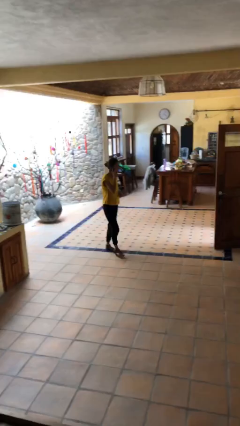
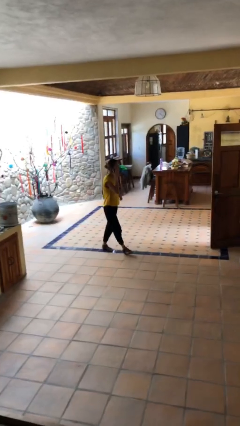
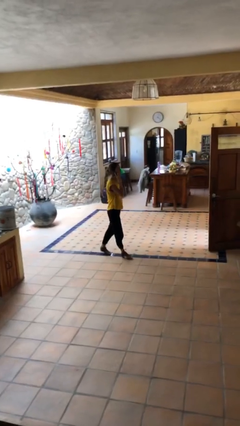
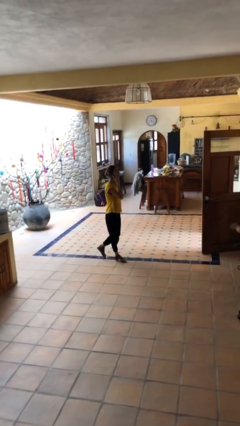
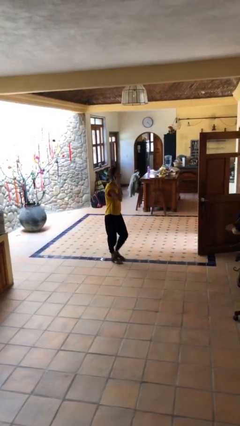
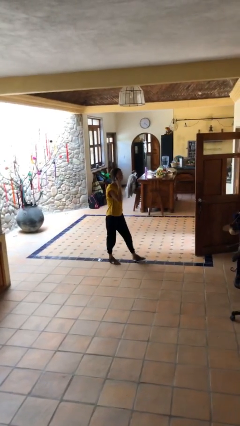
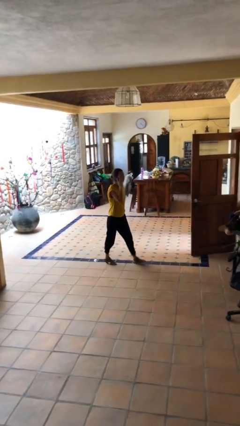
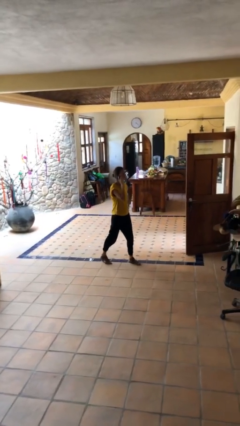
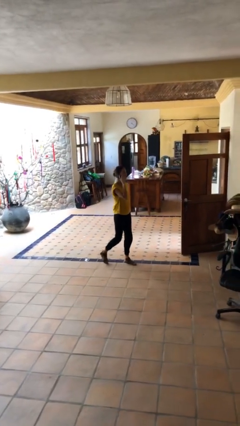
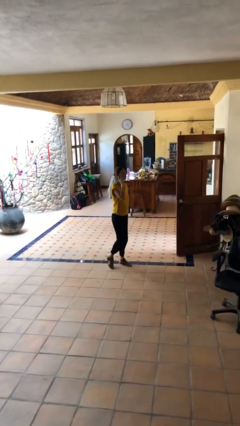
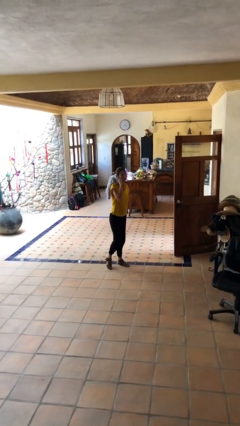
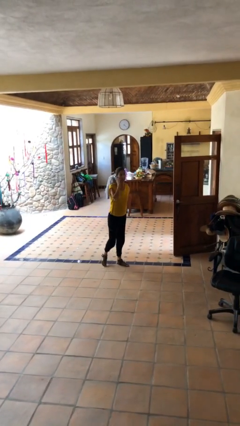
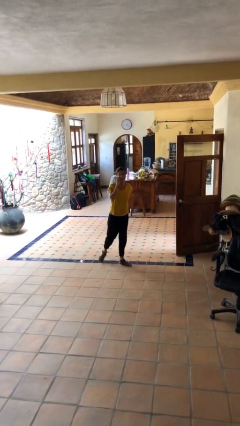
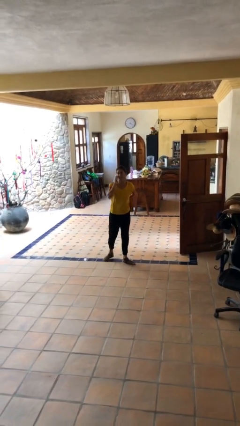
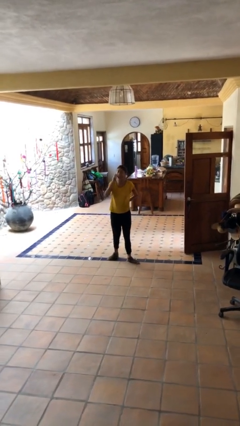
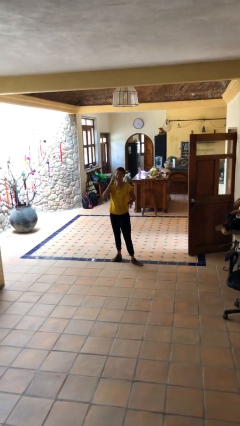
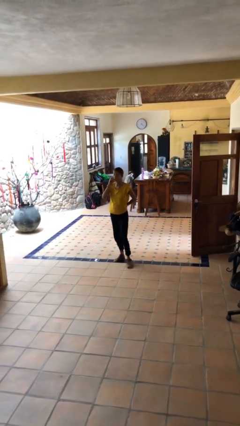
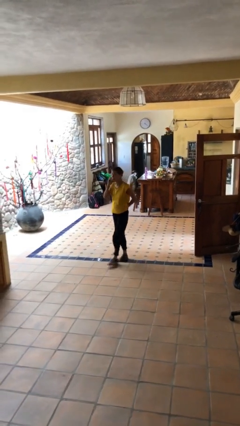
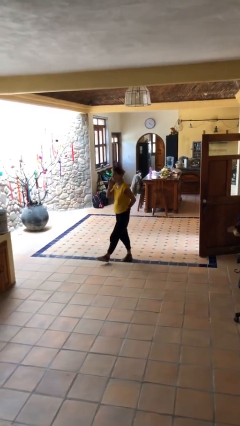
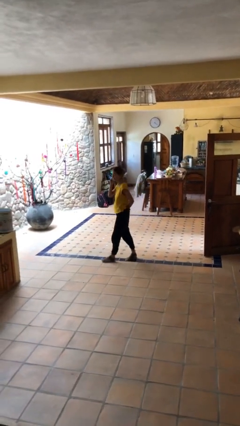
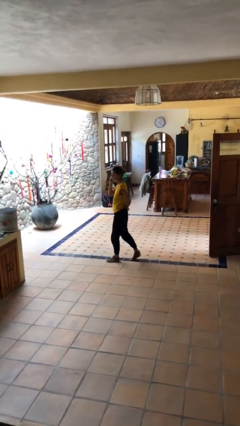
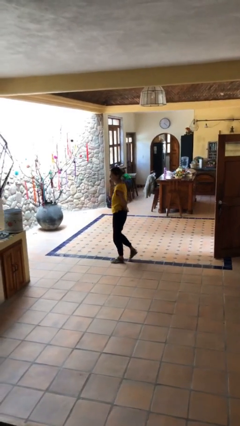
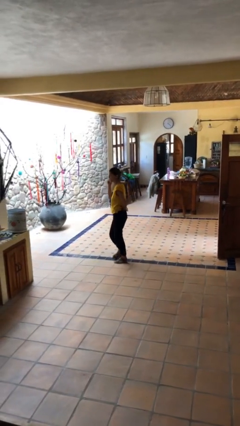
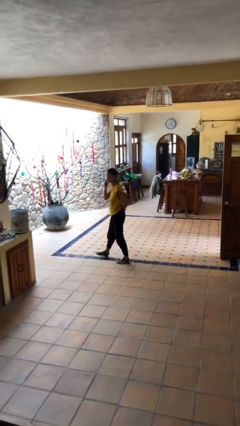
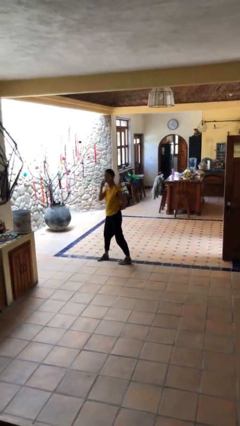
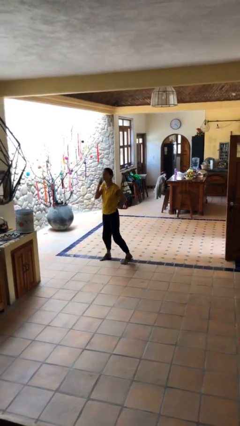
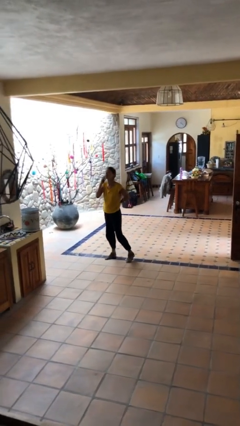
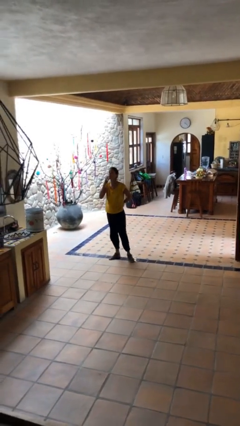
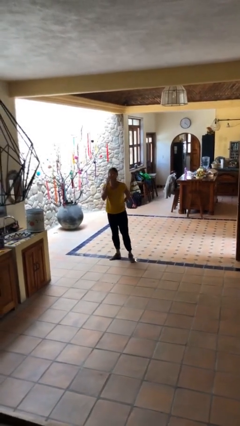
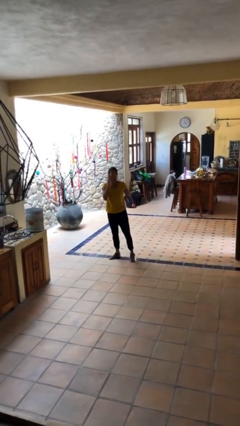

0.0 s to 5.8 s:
person talks on phone

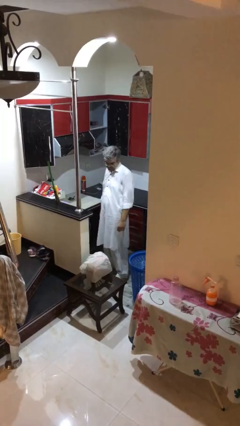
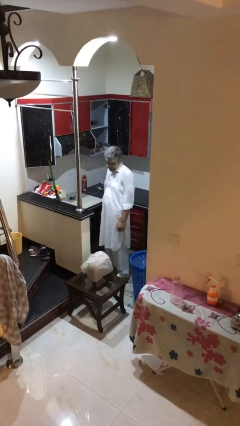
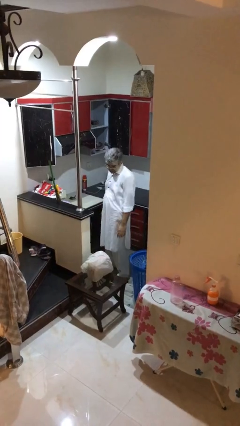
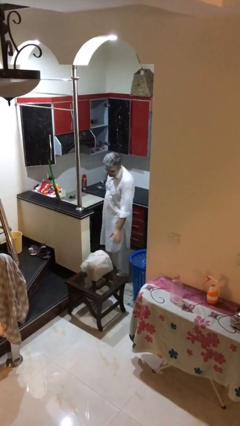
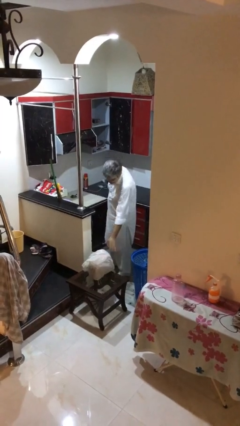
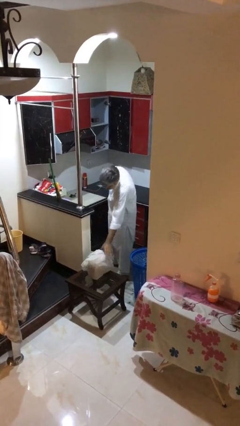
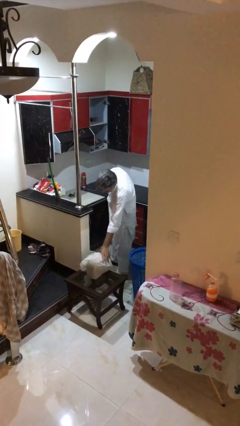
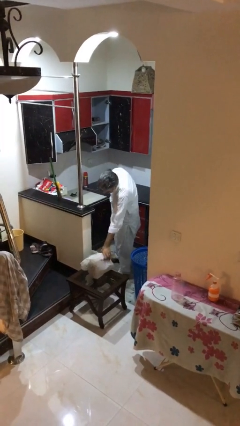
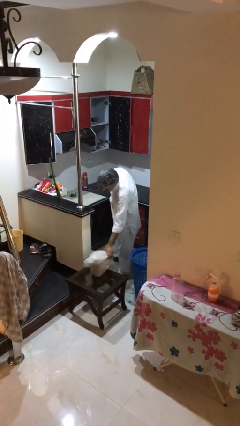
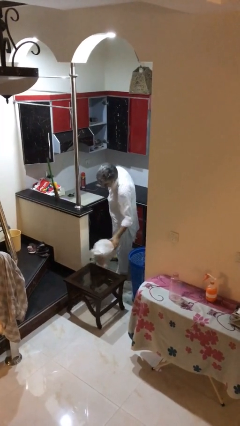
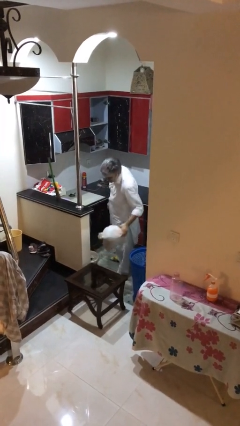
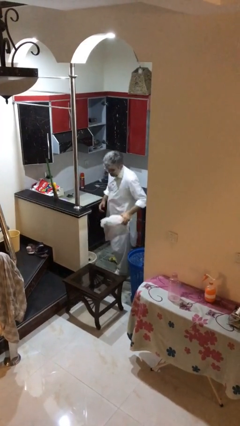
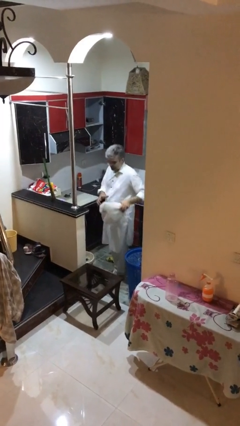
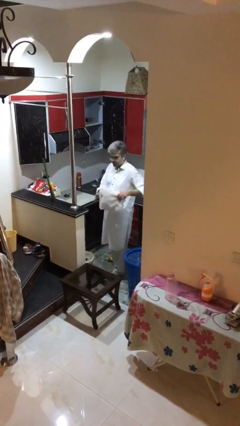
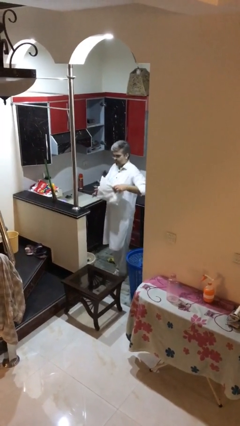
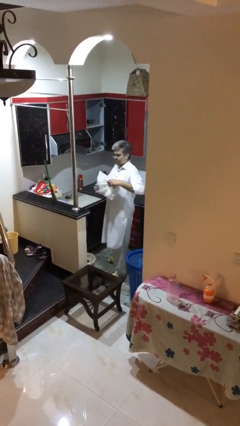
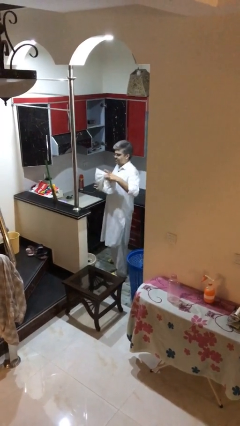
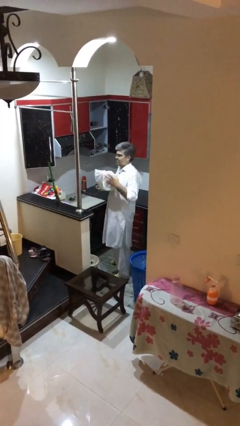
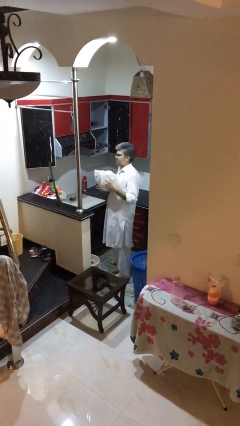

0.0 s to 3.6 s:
person picks up object from table

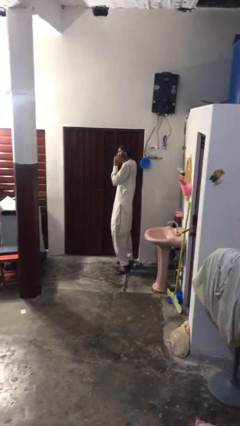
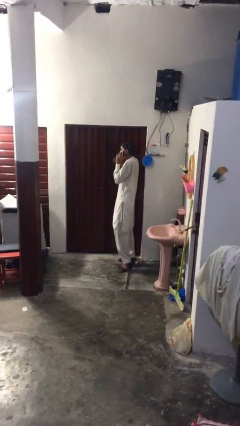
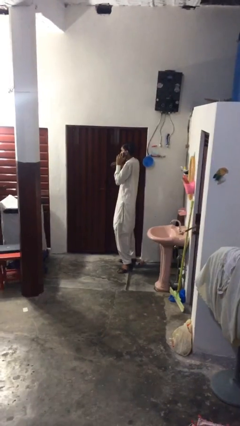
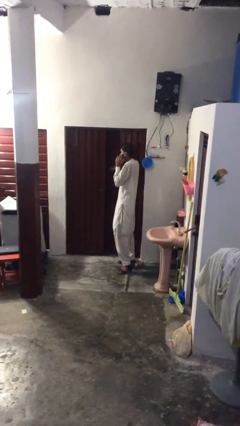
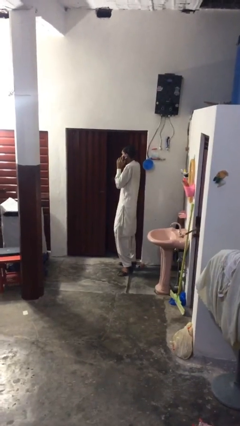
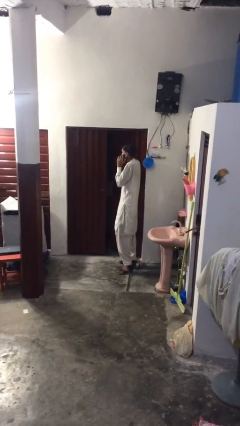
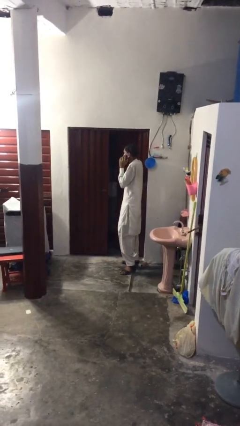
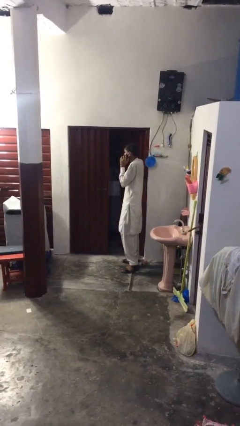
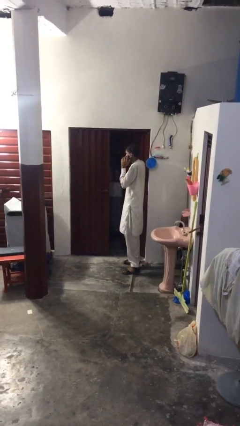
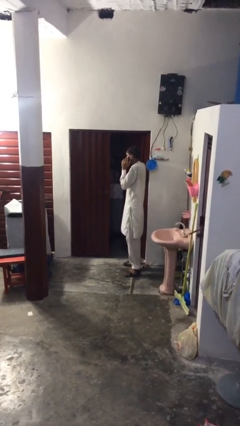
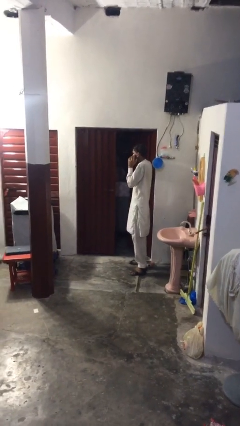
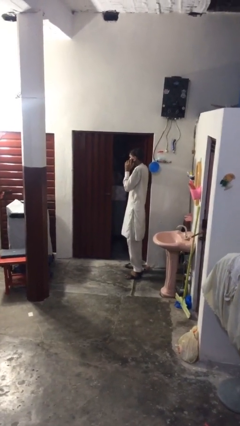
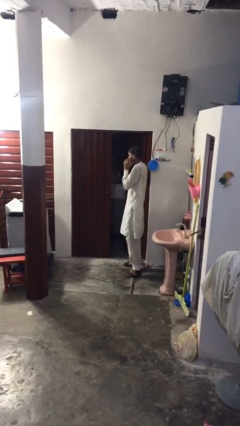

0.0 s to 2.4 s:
person opens facility door

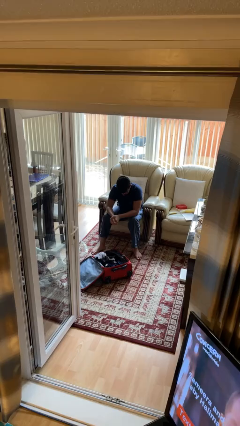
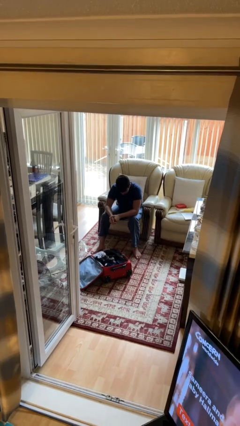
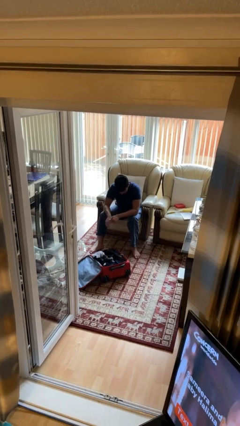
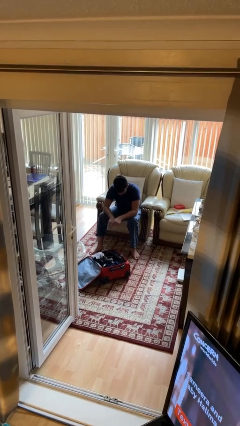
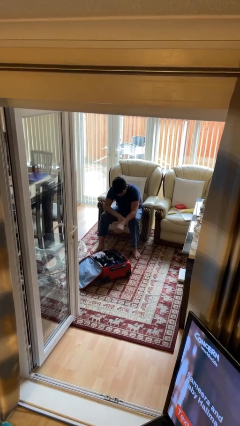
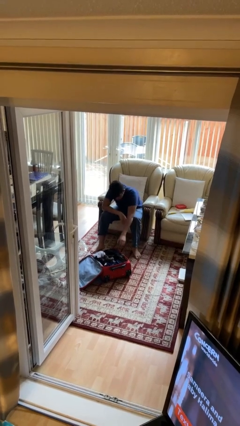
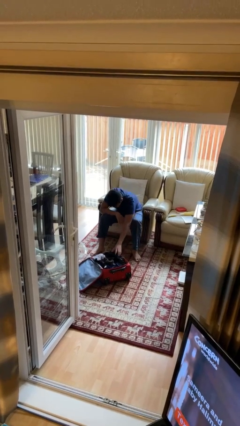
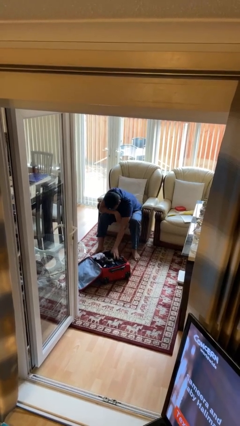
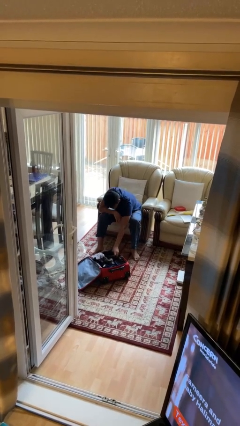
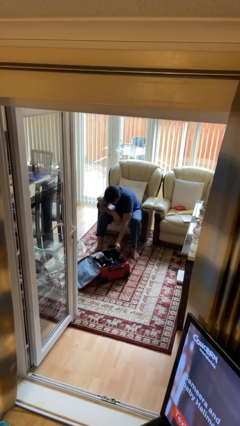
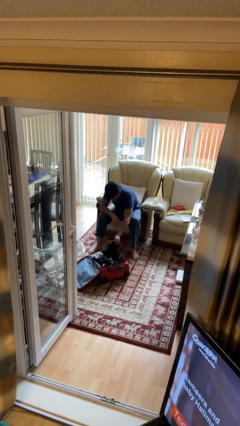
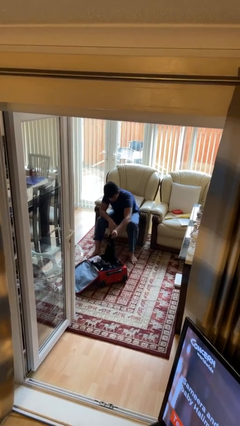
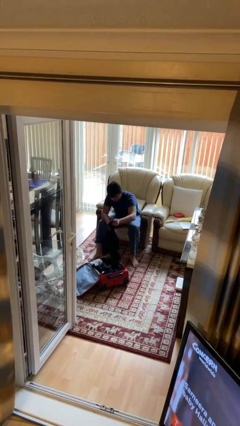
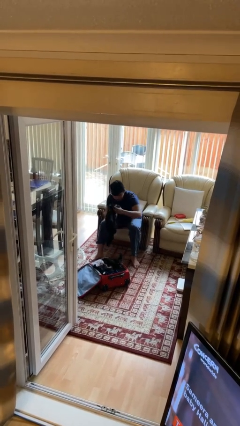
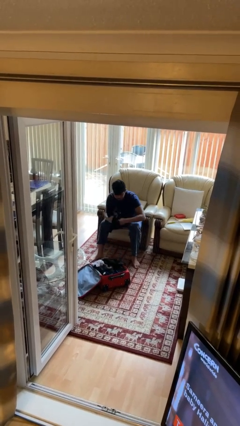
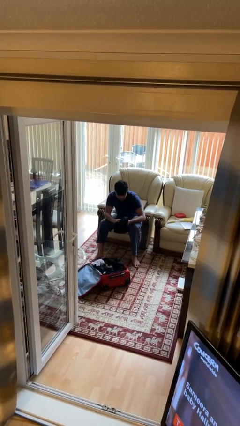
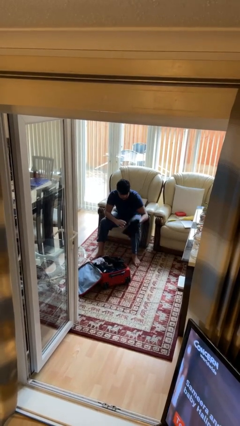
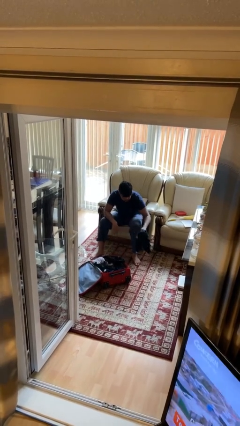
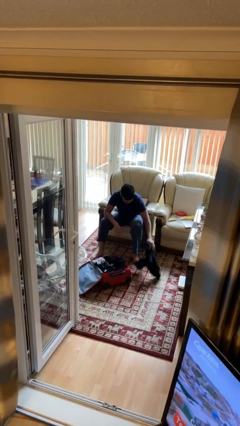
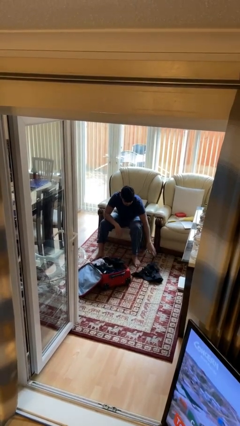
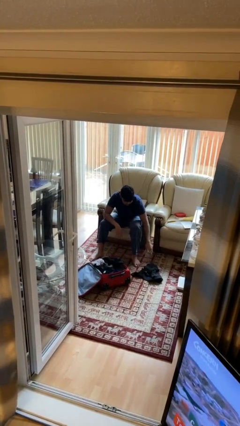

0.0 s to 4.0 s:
person unloads clothes from suitcase

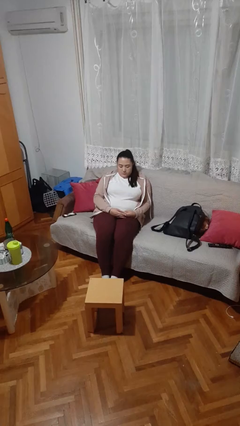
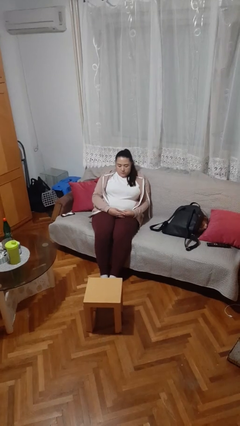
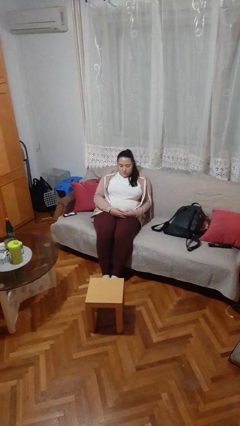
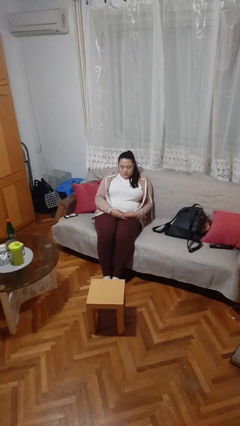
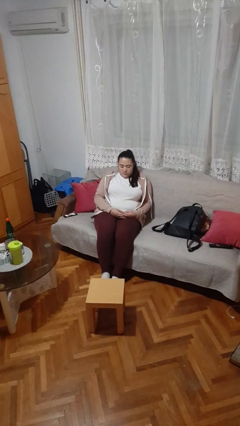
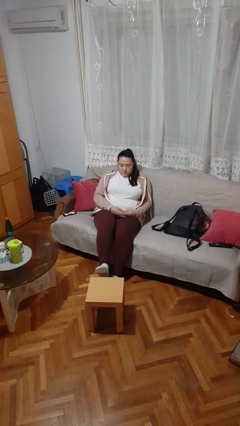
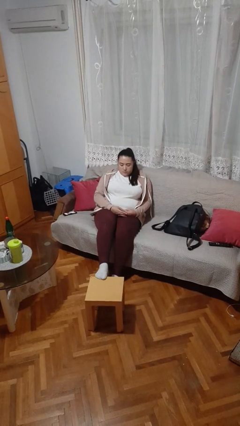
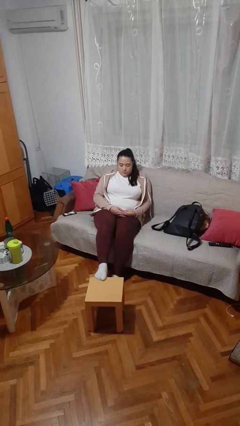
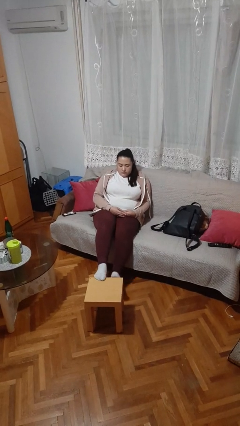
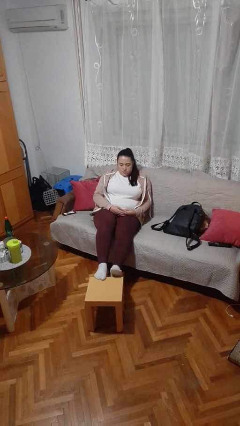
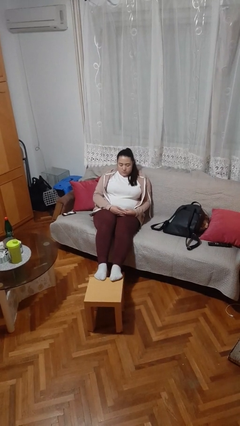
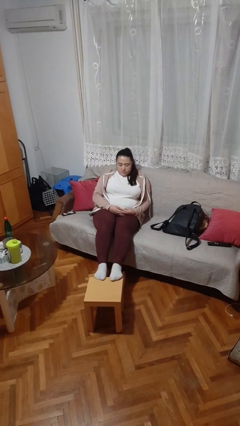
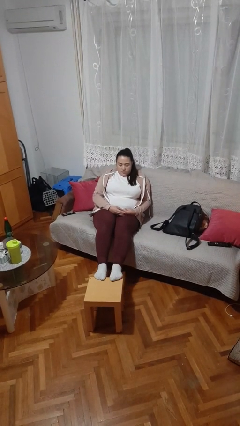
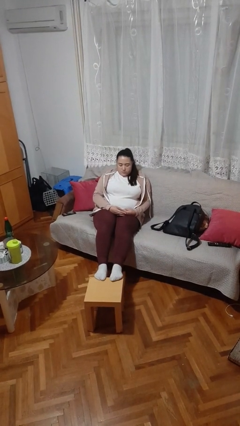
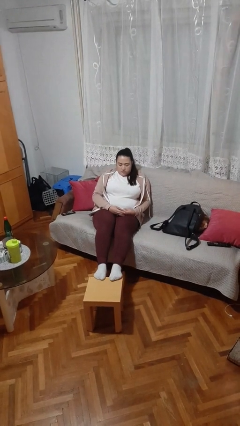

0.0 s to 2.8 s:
person puts feet up
